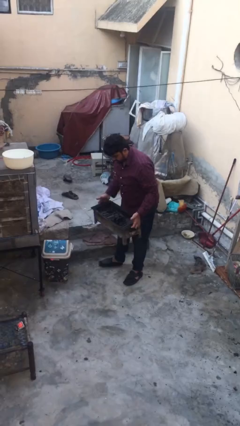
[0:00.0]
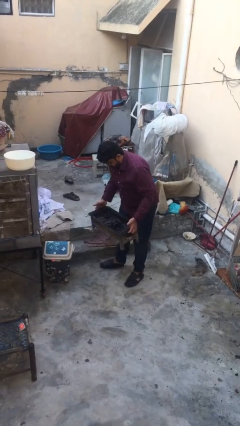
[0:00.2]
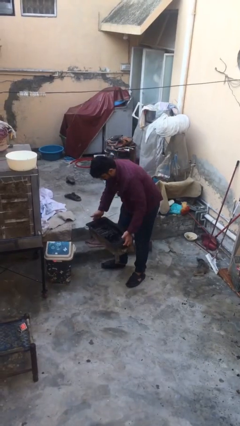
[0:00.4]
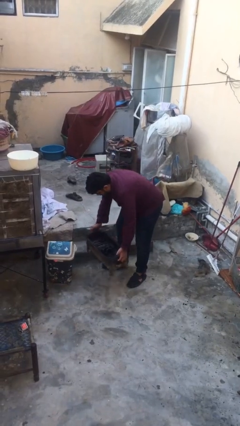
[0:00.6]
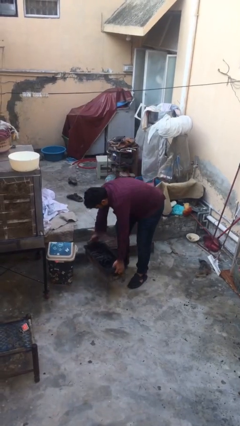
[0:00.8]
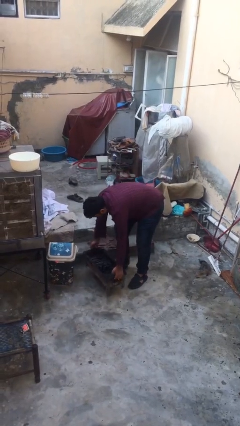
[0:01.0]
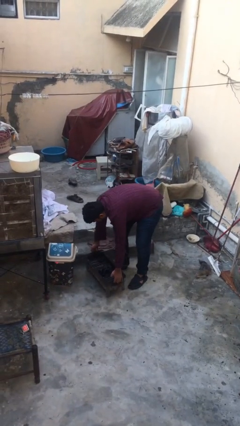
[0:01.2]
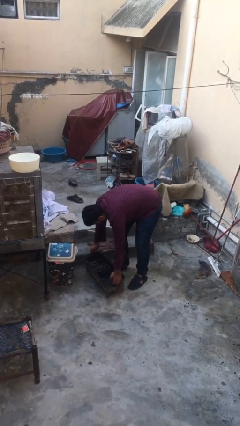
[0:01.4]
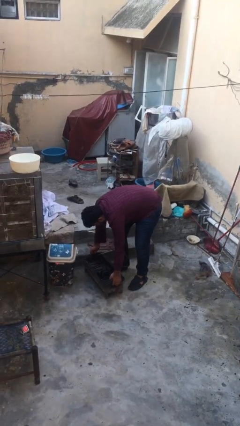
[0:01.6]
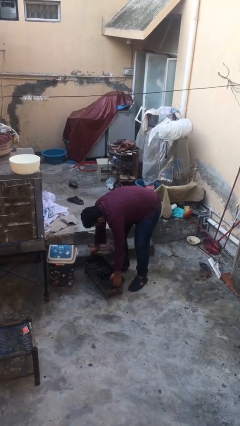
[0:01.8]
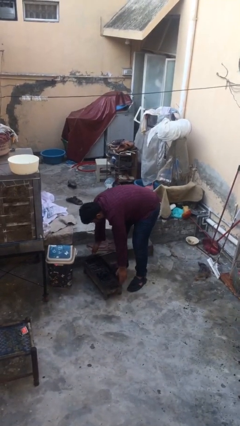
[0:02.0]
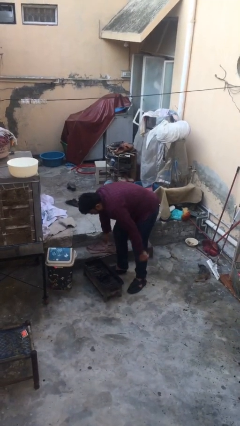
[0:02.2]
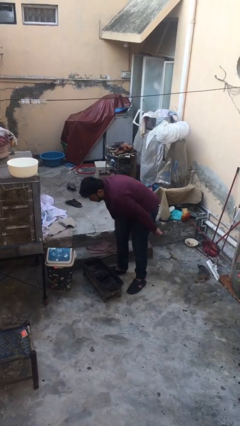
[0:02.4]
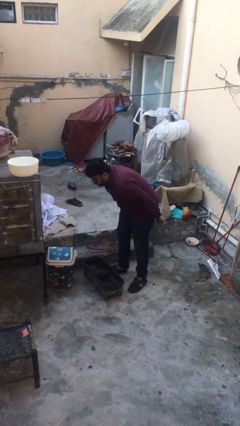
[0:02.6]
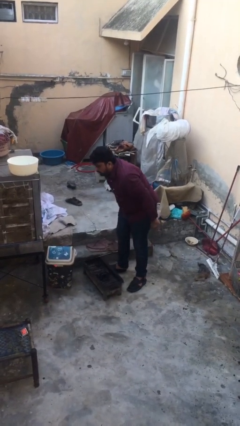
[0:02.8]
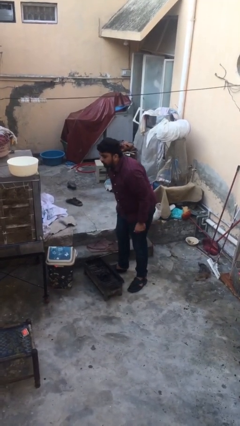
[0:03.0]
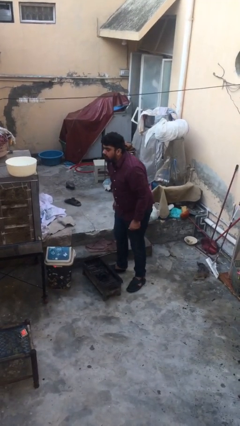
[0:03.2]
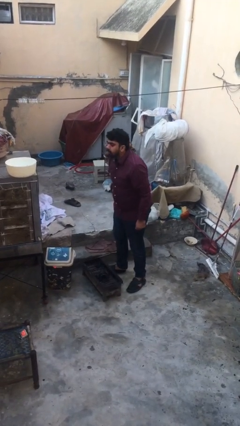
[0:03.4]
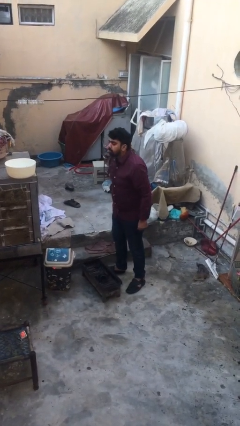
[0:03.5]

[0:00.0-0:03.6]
person puts down object on floor

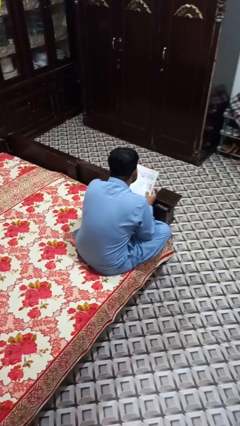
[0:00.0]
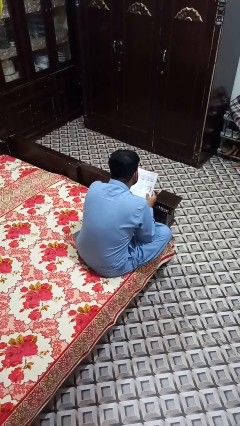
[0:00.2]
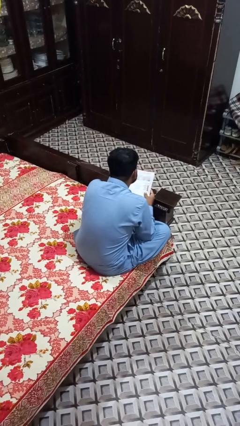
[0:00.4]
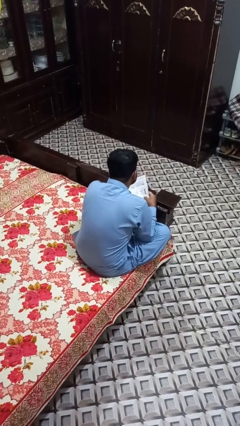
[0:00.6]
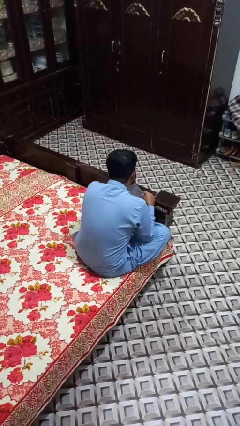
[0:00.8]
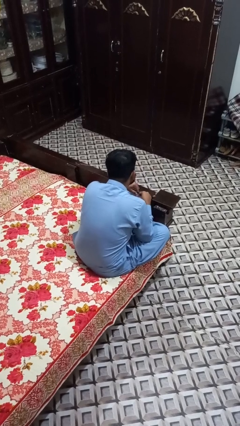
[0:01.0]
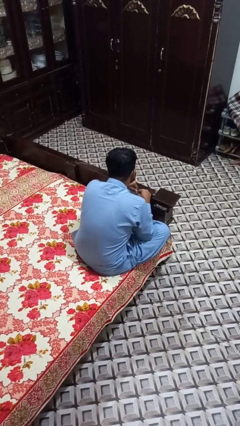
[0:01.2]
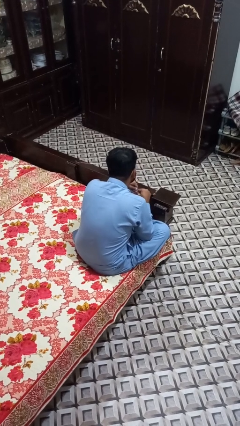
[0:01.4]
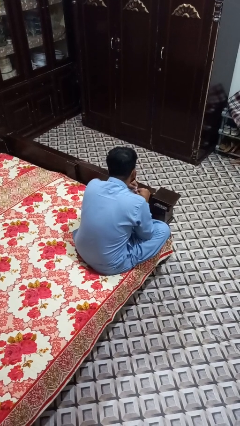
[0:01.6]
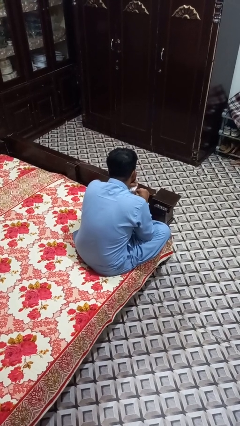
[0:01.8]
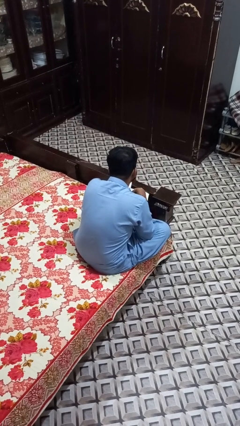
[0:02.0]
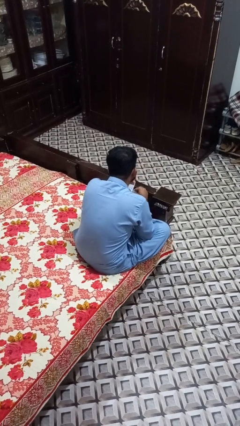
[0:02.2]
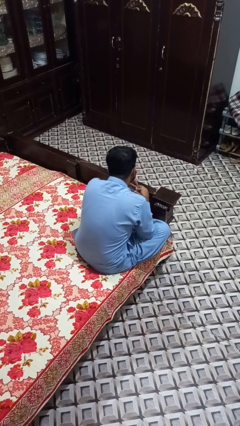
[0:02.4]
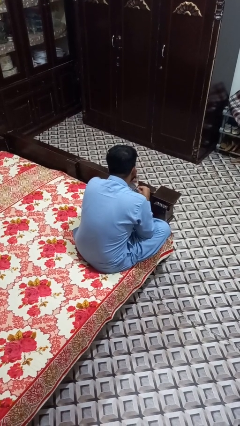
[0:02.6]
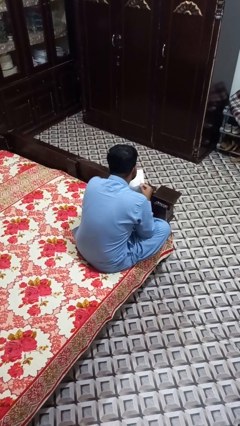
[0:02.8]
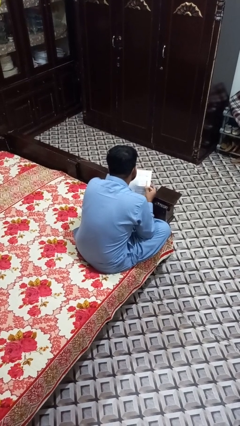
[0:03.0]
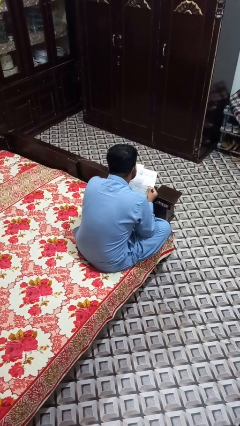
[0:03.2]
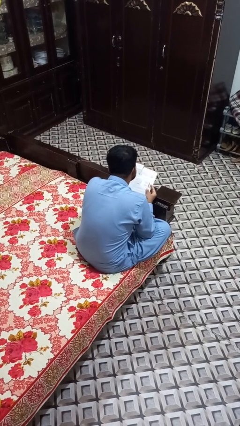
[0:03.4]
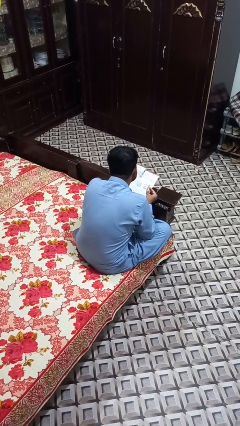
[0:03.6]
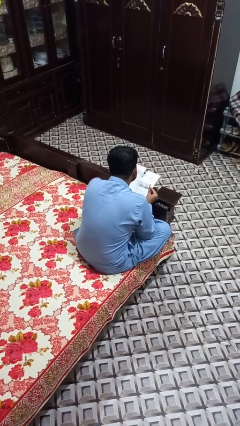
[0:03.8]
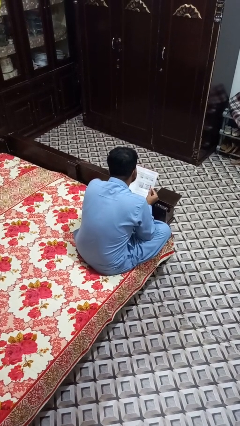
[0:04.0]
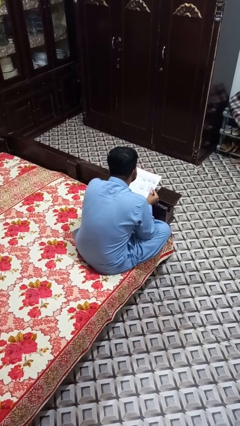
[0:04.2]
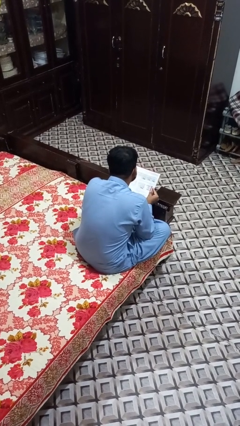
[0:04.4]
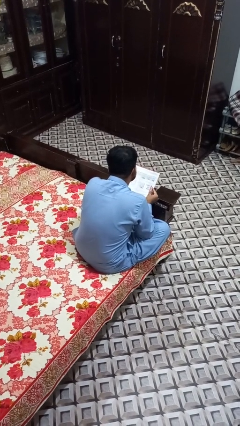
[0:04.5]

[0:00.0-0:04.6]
person tears paper

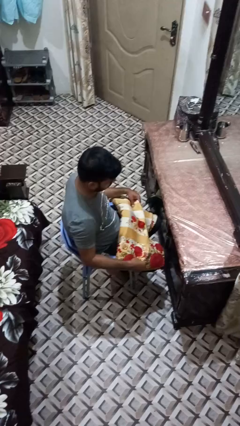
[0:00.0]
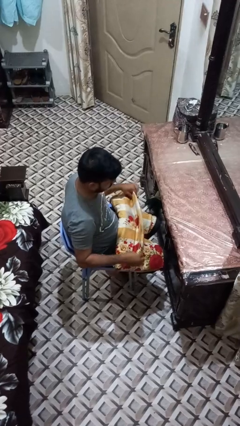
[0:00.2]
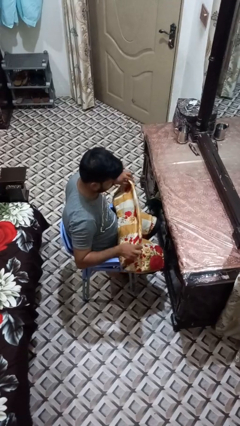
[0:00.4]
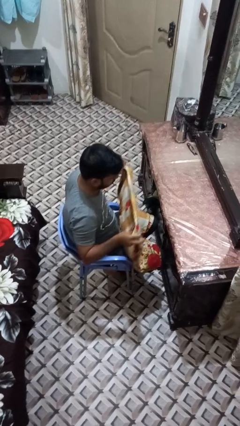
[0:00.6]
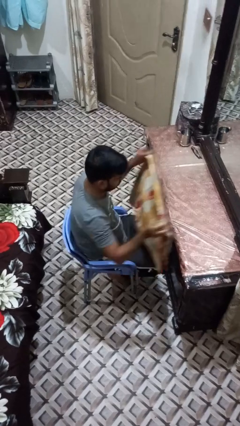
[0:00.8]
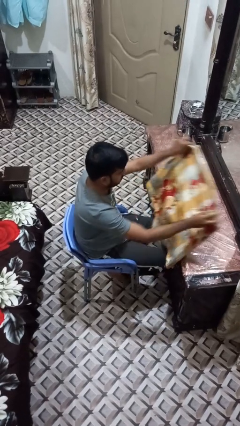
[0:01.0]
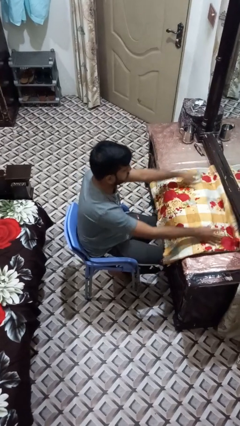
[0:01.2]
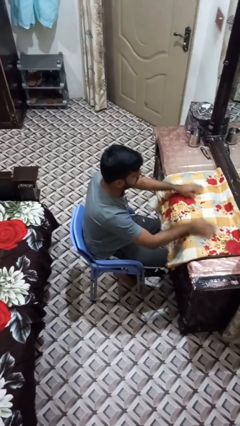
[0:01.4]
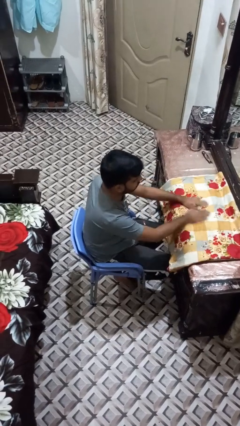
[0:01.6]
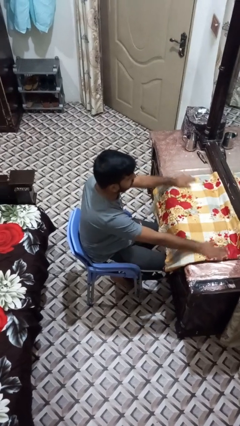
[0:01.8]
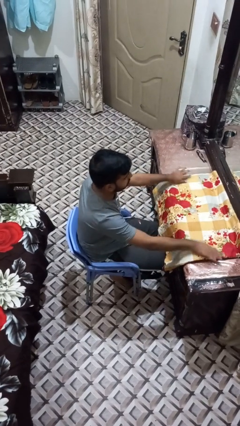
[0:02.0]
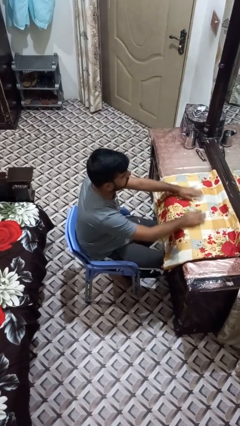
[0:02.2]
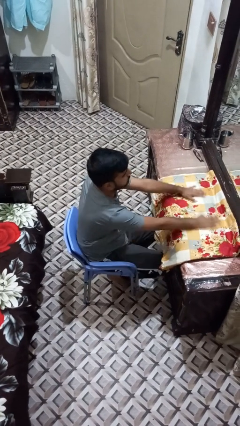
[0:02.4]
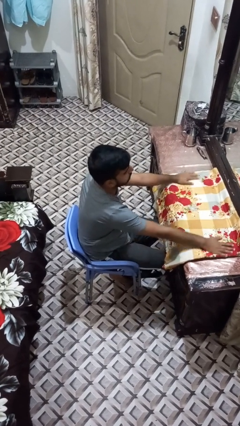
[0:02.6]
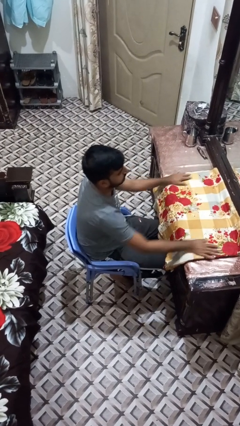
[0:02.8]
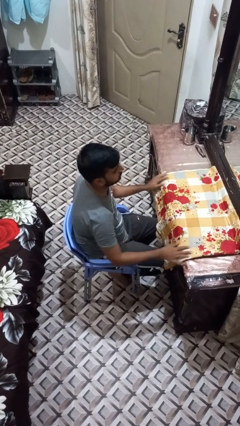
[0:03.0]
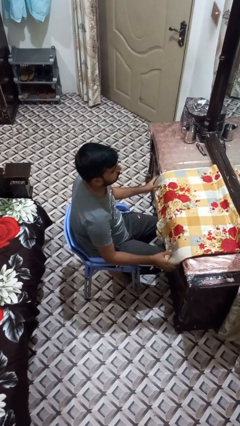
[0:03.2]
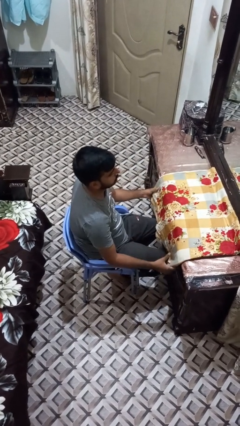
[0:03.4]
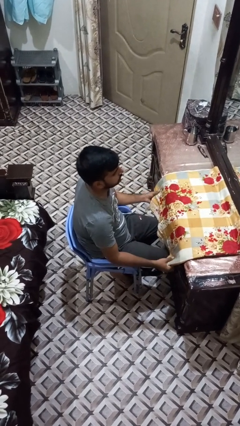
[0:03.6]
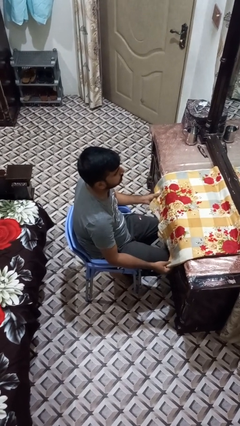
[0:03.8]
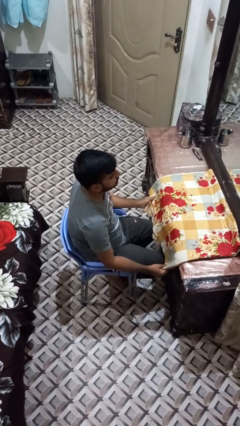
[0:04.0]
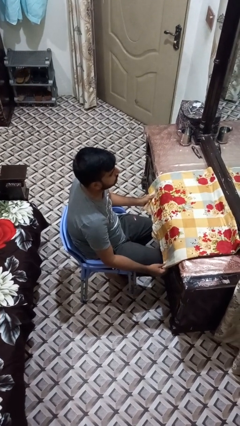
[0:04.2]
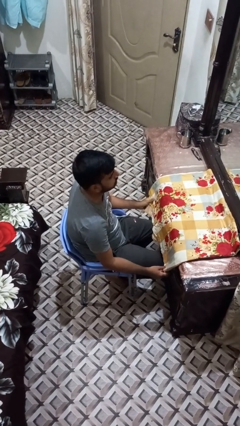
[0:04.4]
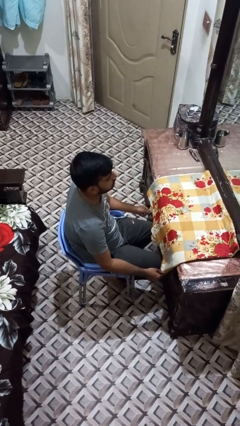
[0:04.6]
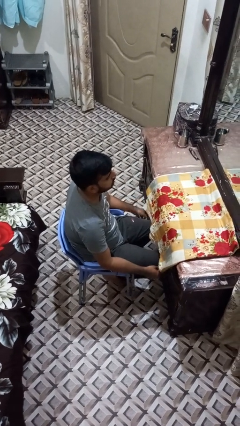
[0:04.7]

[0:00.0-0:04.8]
person spreads tablecloth

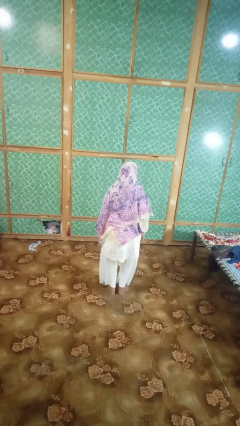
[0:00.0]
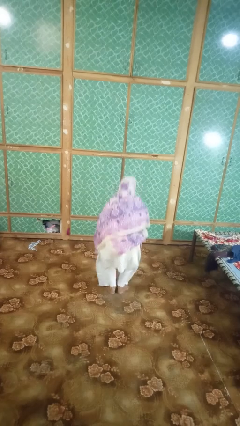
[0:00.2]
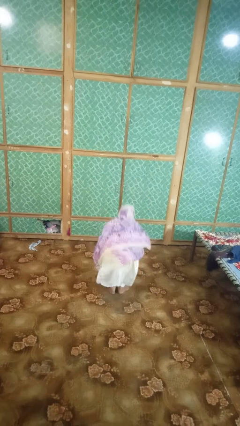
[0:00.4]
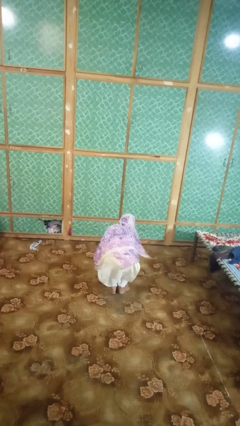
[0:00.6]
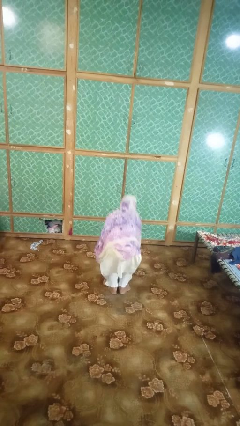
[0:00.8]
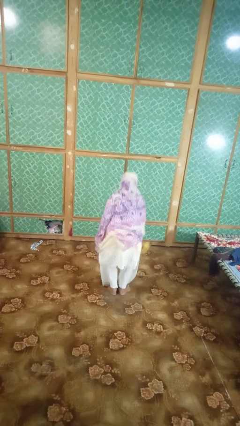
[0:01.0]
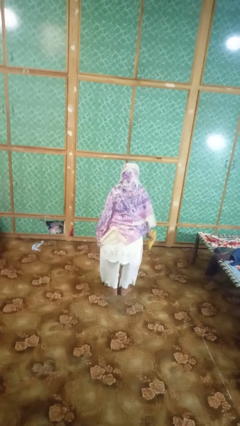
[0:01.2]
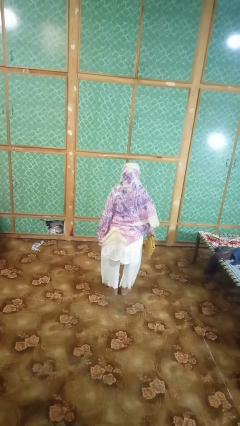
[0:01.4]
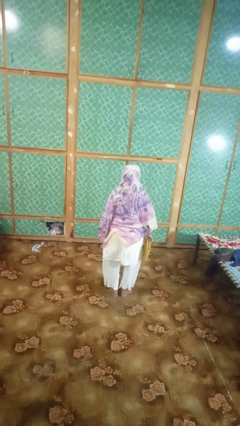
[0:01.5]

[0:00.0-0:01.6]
person picks up object from floor

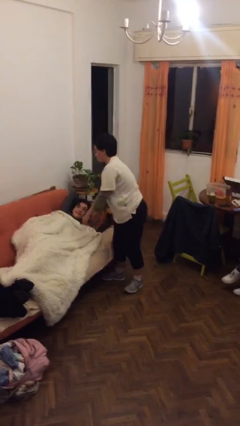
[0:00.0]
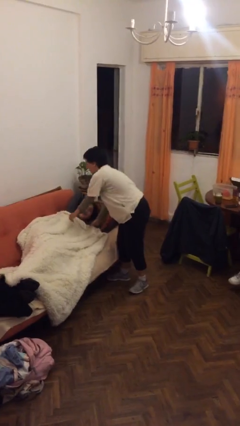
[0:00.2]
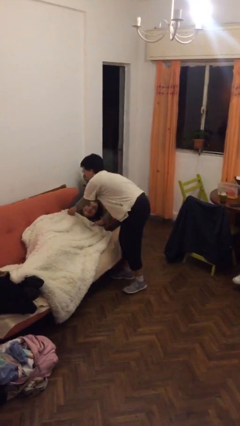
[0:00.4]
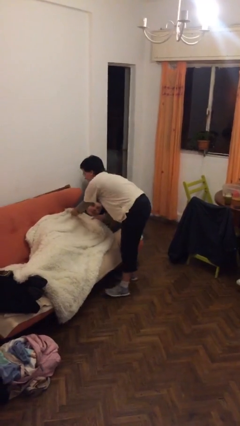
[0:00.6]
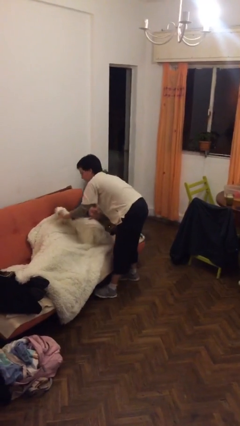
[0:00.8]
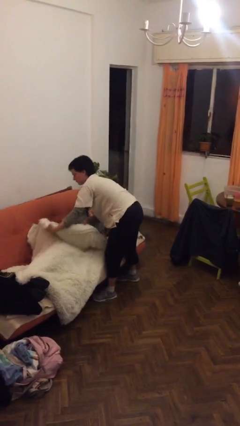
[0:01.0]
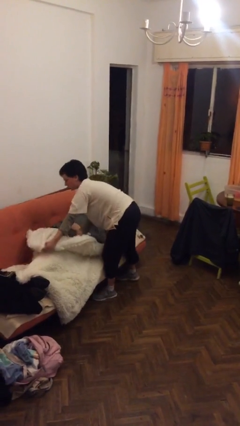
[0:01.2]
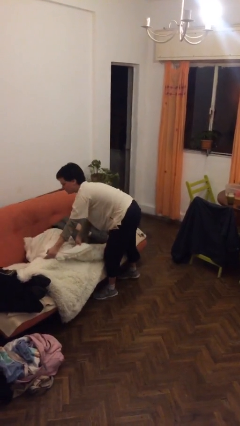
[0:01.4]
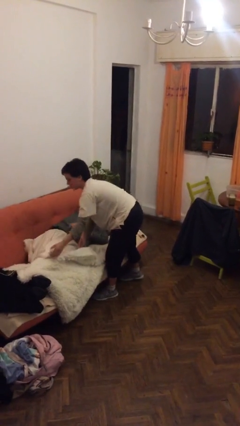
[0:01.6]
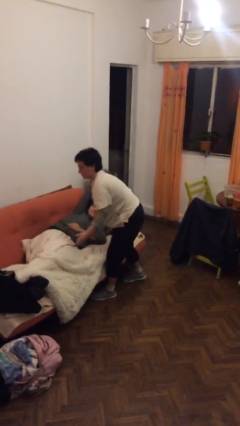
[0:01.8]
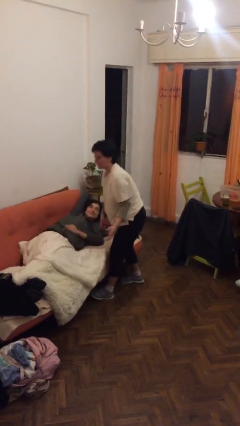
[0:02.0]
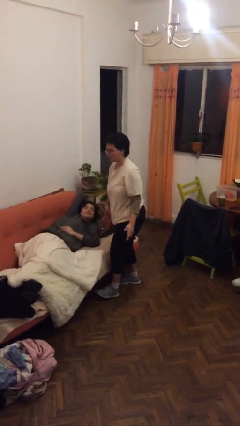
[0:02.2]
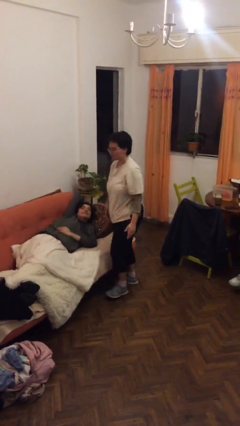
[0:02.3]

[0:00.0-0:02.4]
person uncovers friend with blanket

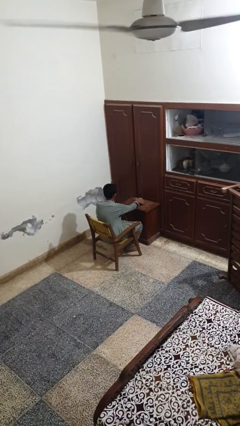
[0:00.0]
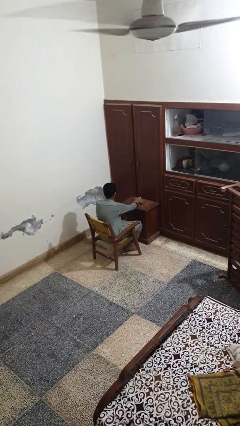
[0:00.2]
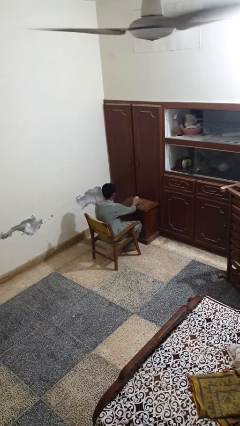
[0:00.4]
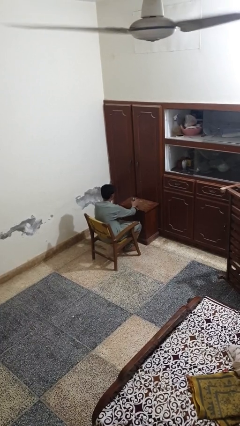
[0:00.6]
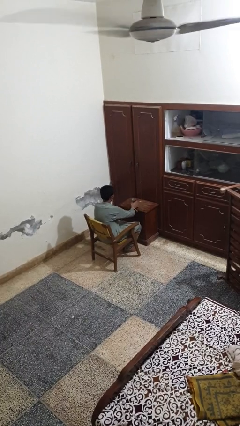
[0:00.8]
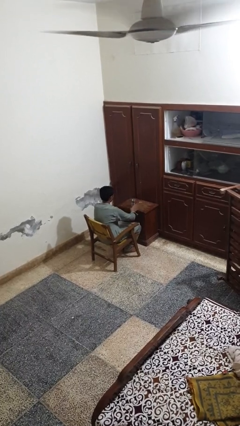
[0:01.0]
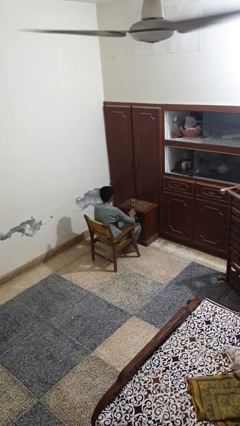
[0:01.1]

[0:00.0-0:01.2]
person sets upright glass
